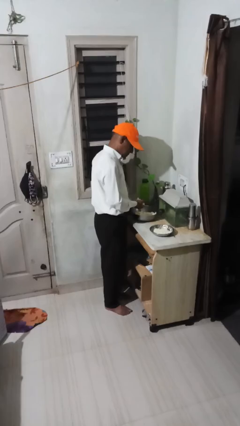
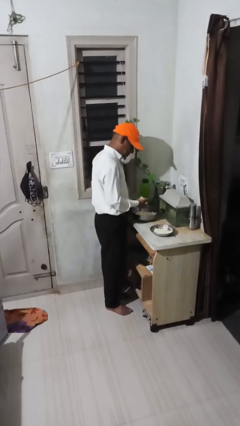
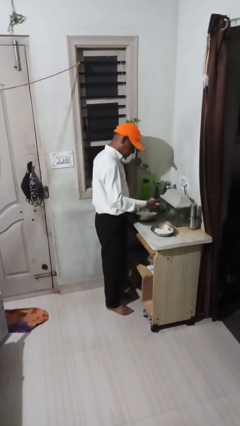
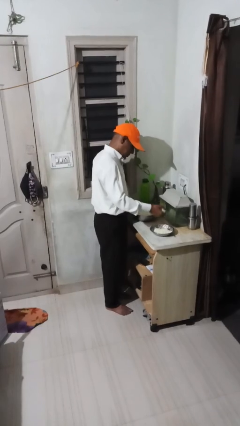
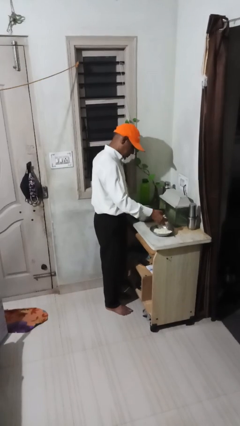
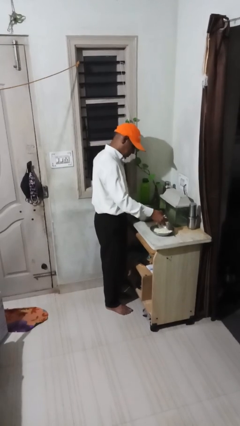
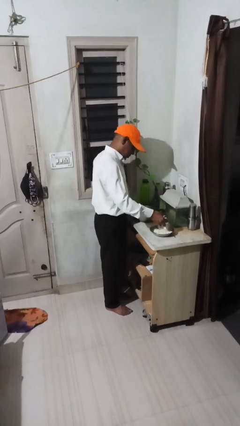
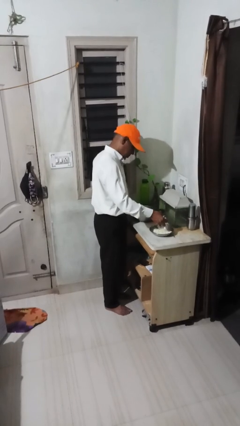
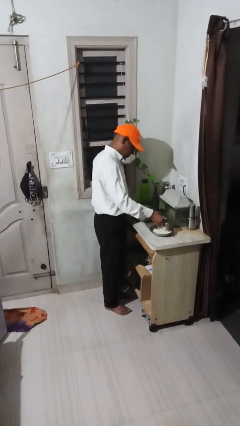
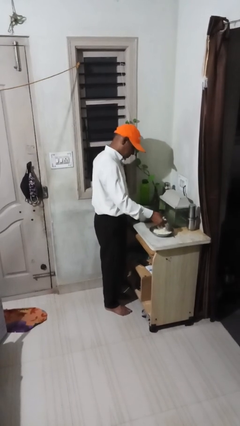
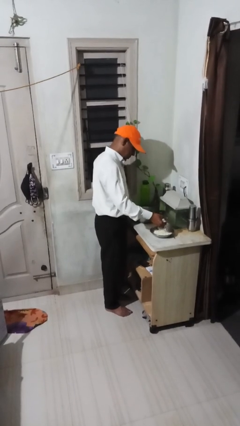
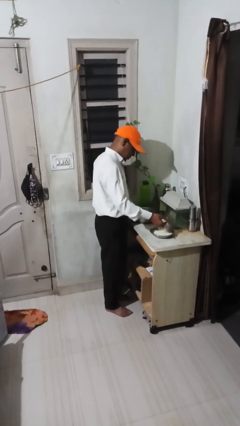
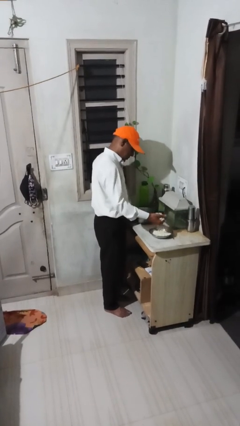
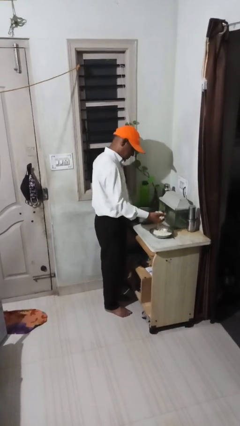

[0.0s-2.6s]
person pours into bowl

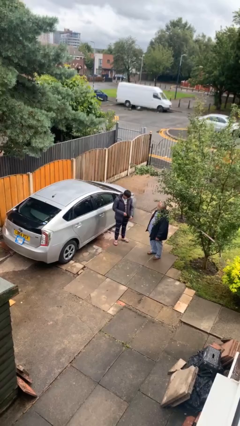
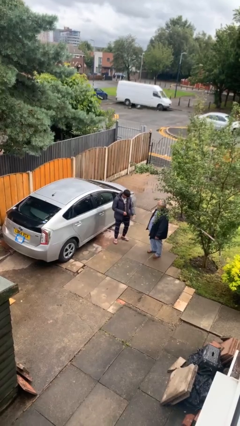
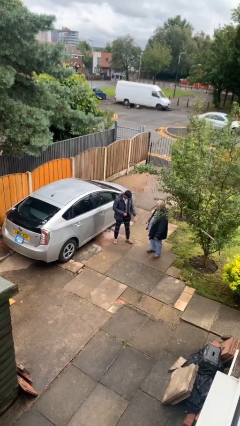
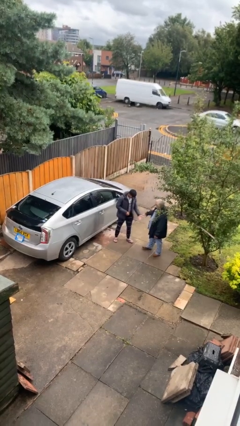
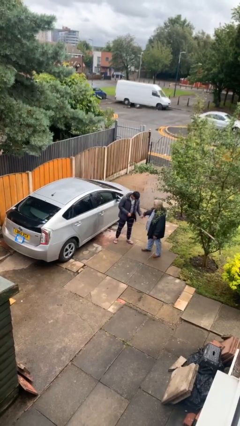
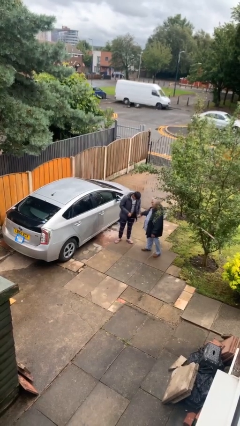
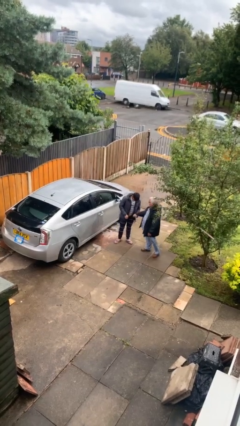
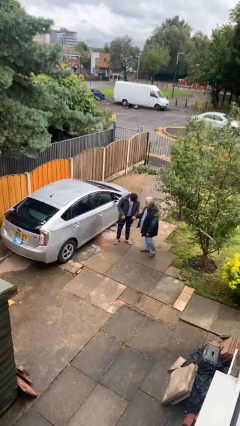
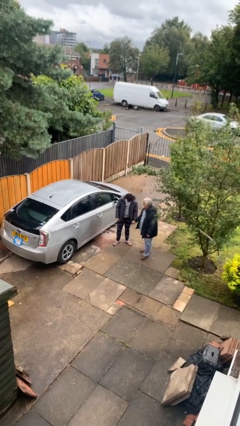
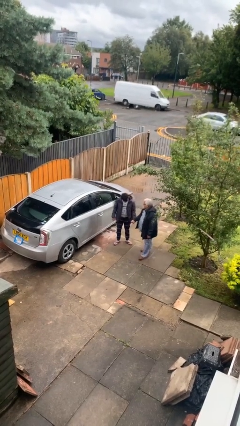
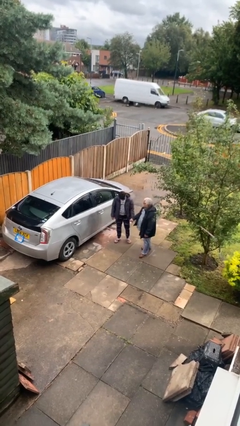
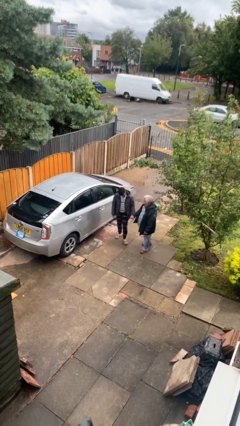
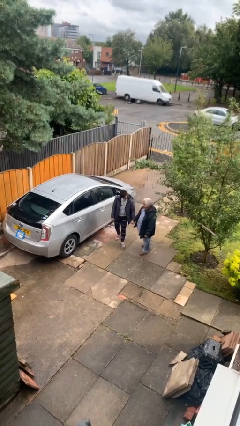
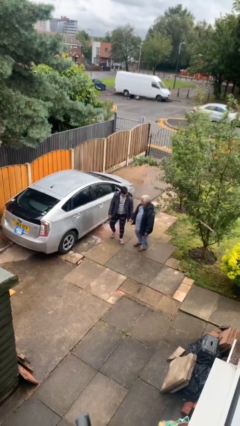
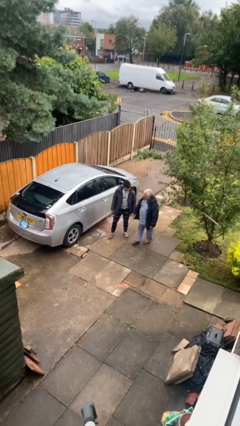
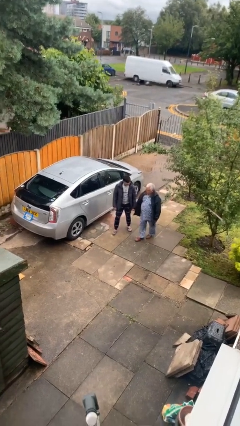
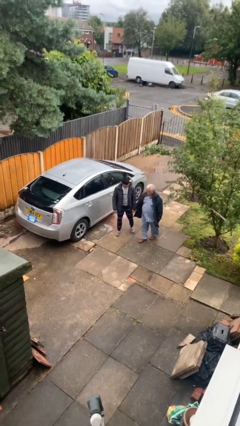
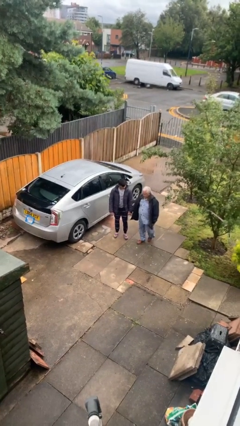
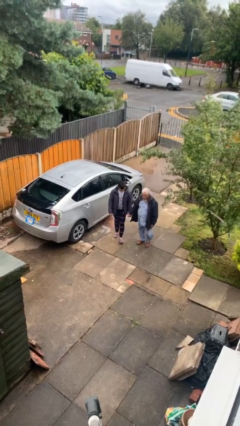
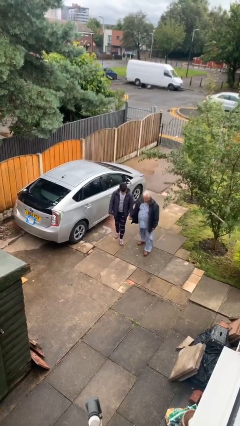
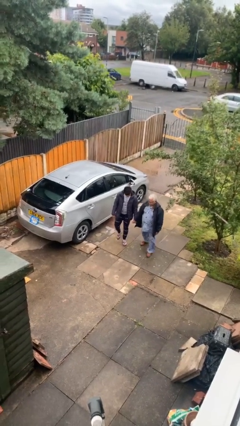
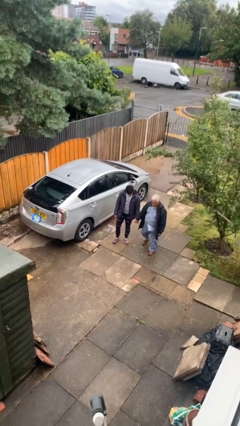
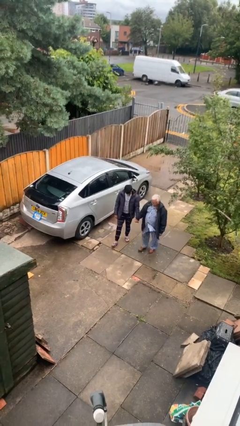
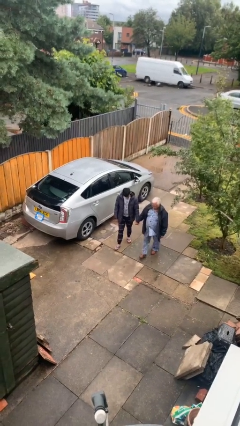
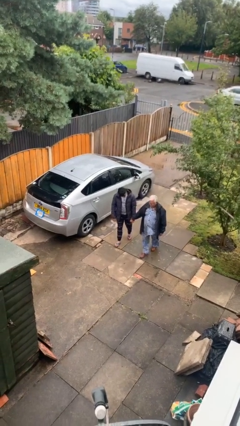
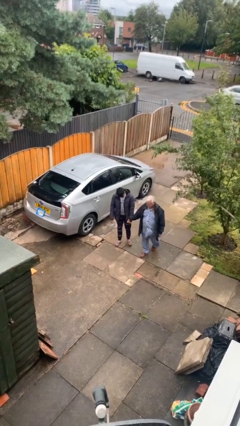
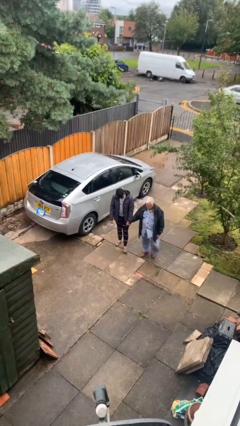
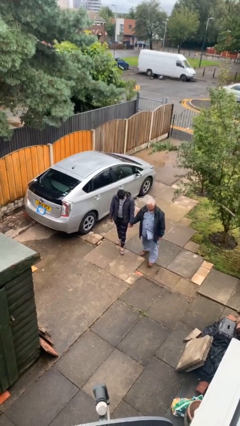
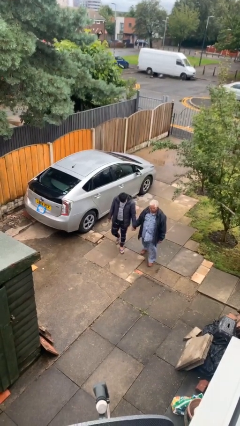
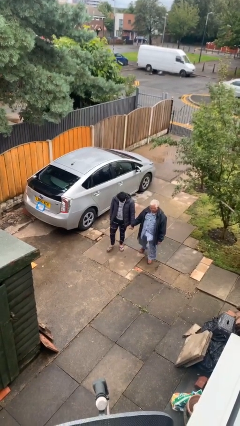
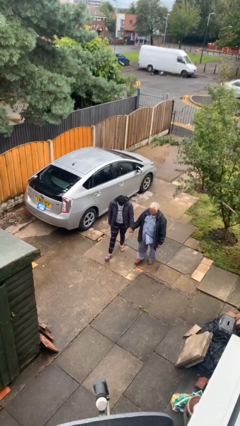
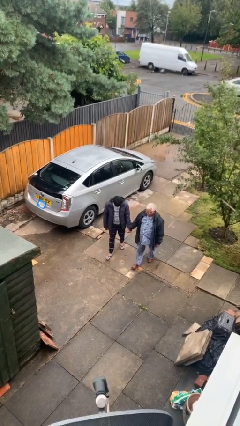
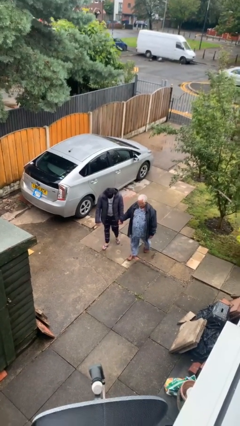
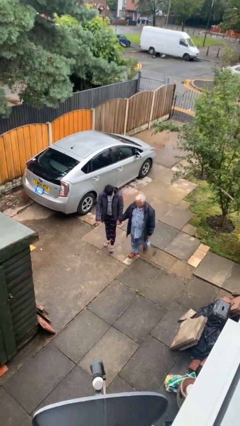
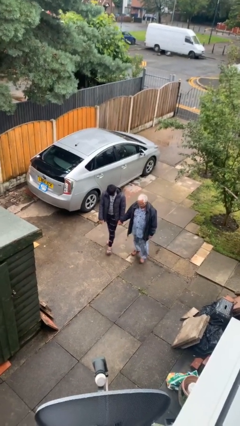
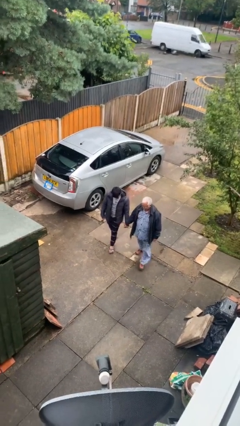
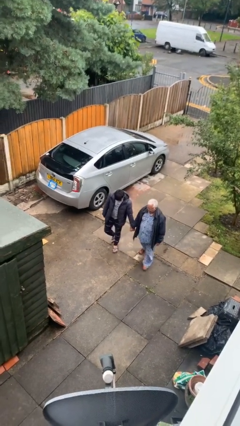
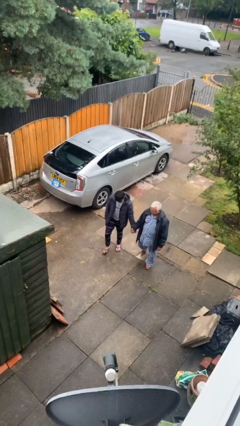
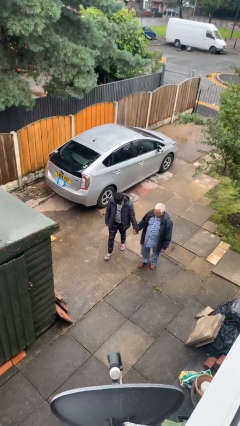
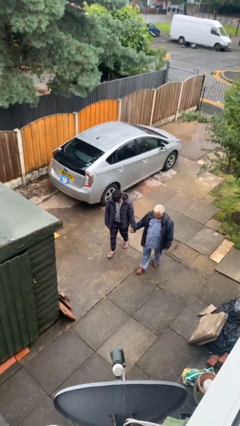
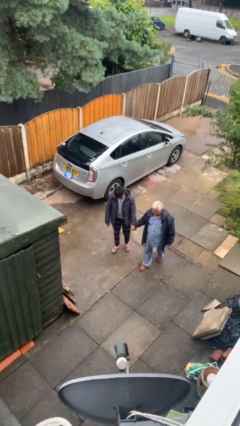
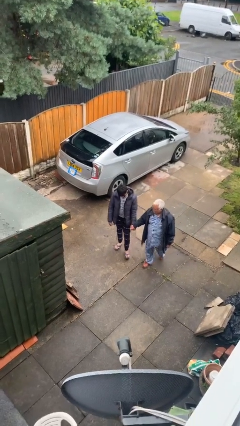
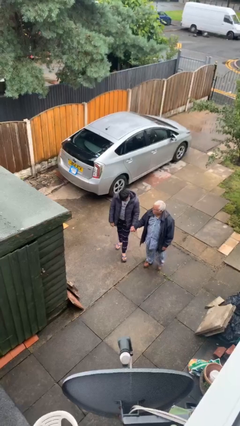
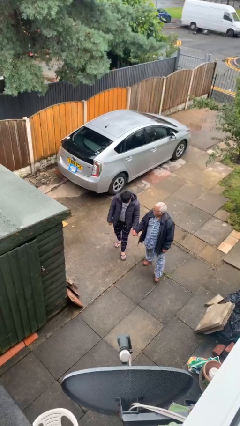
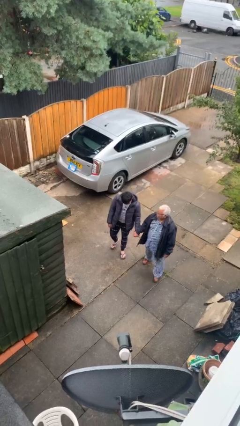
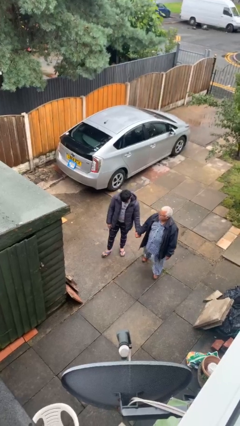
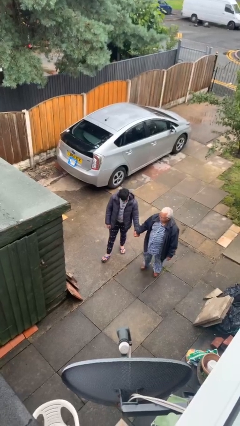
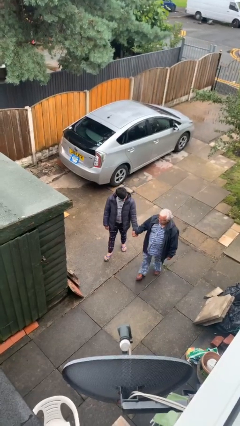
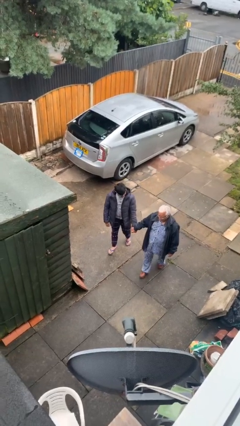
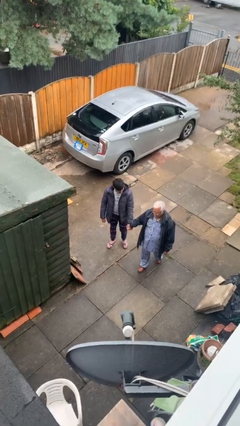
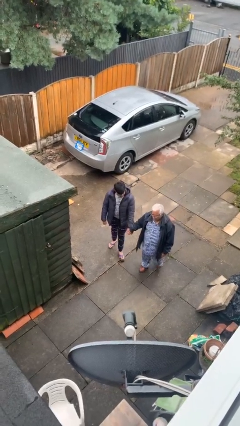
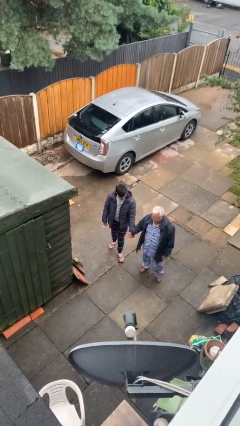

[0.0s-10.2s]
person holds hand

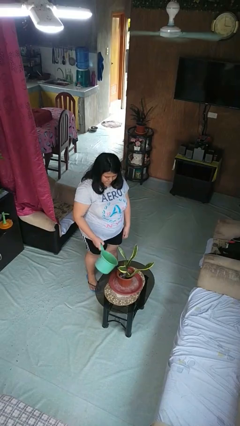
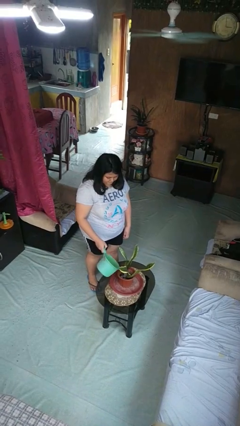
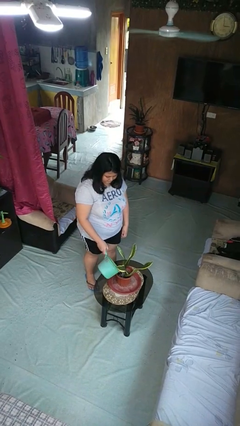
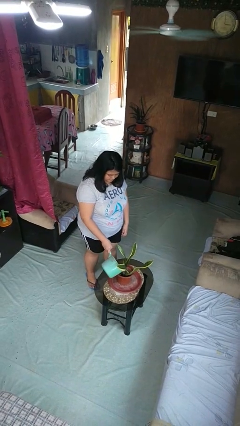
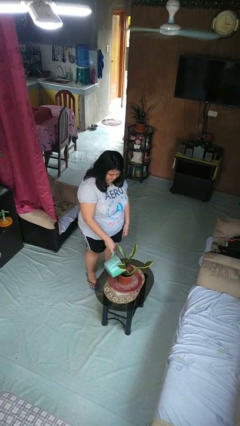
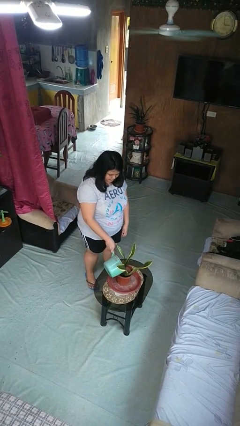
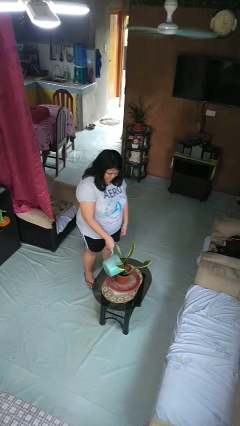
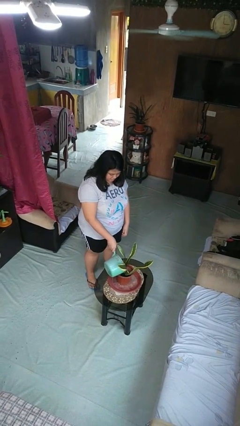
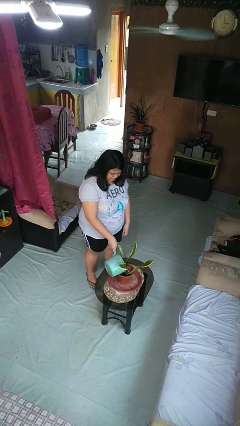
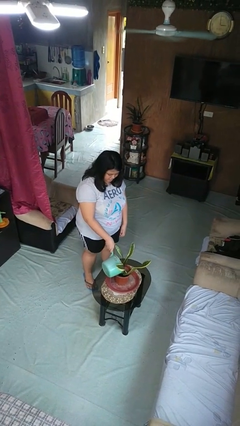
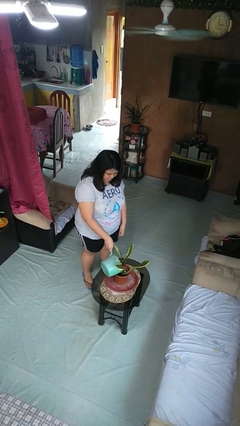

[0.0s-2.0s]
person waters houseplant

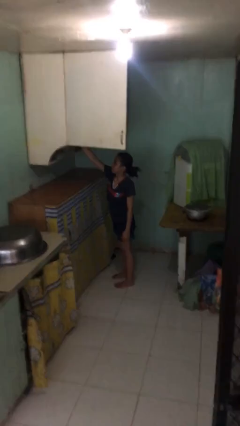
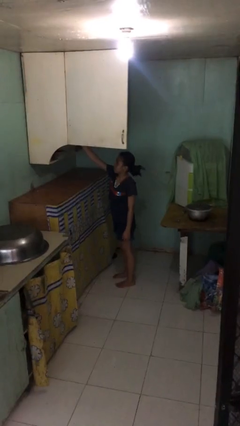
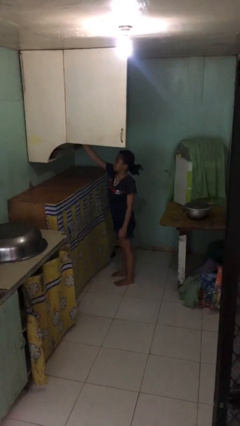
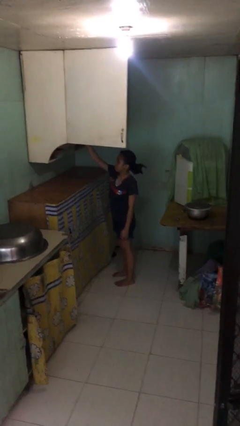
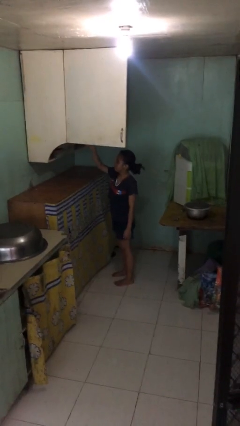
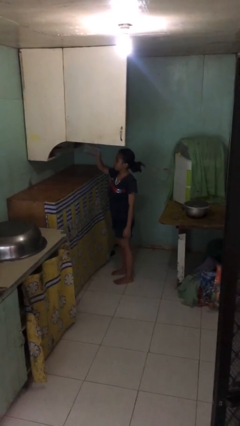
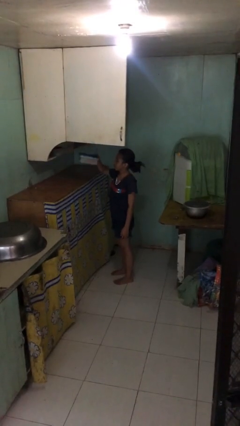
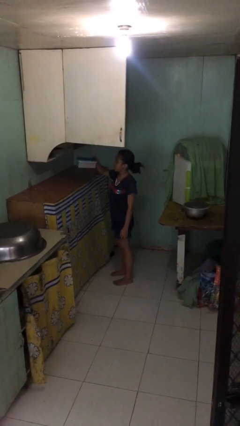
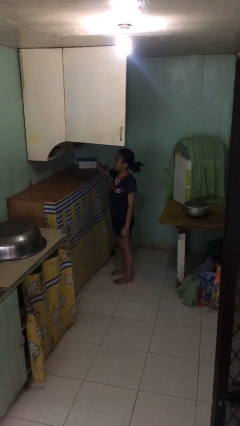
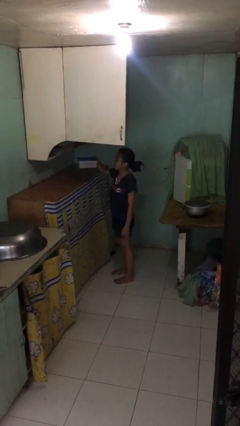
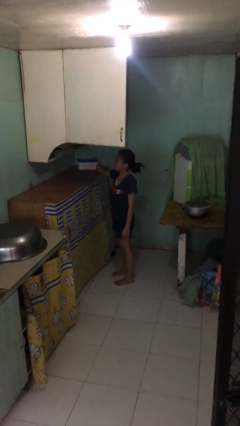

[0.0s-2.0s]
person picks up object from shelf

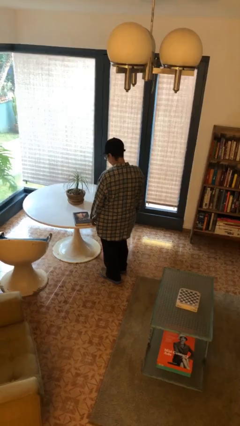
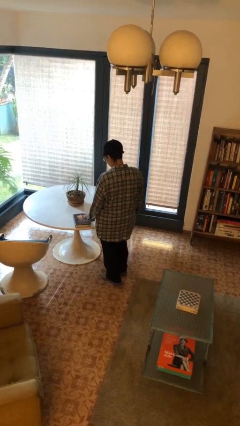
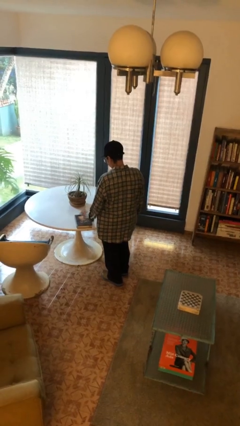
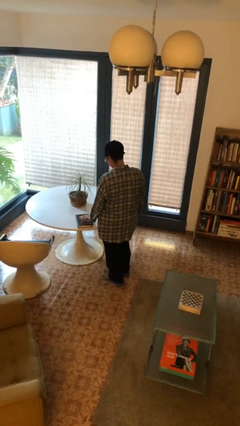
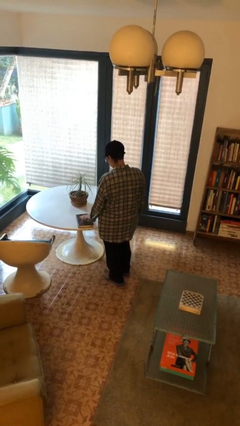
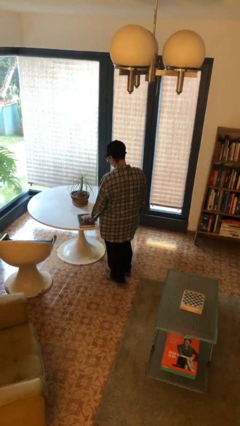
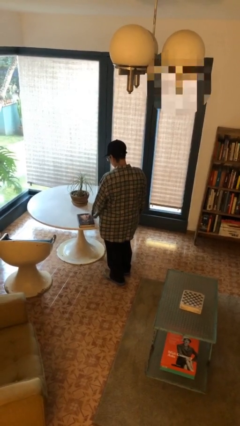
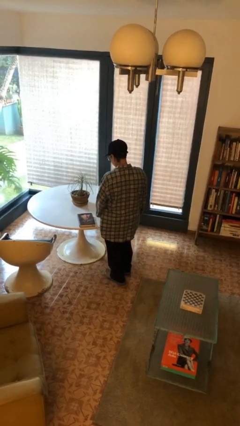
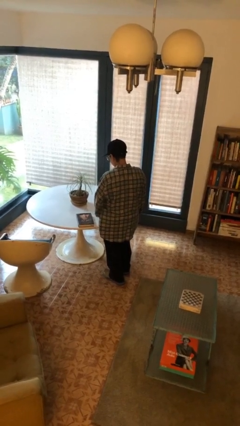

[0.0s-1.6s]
person taps object with finger
